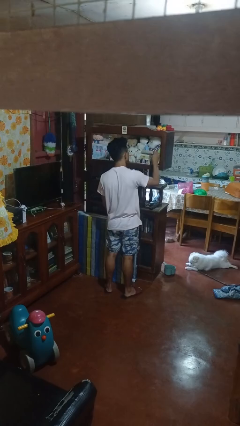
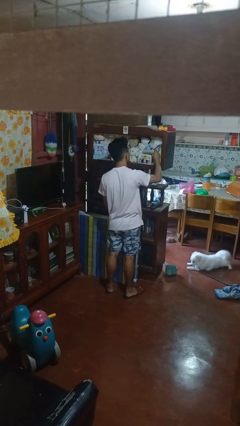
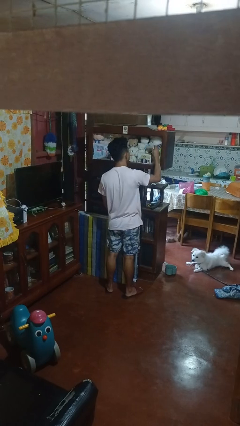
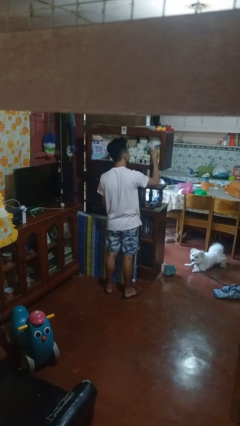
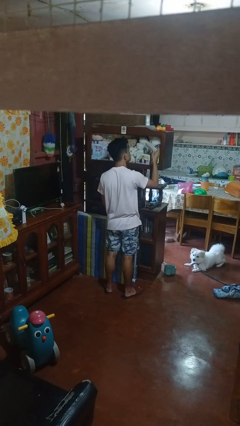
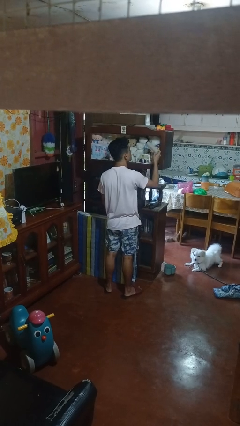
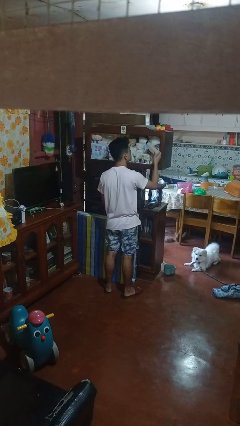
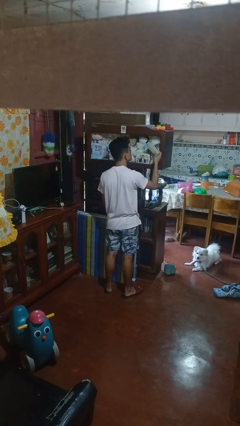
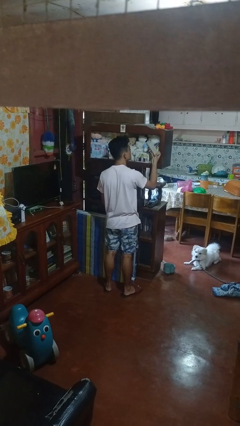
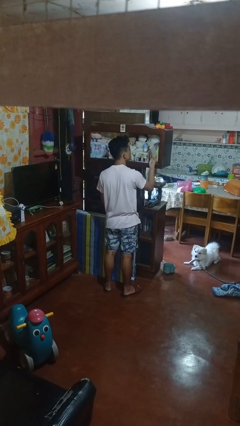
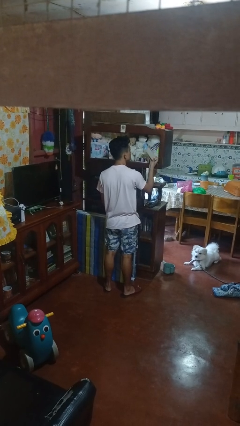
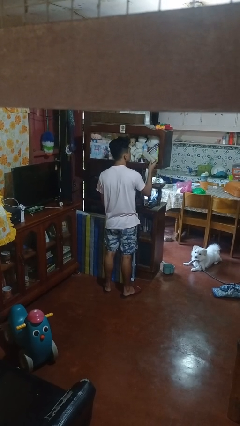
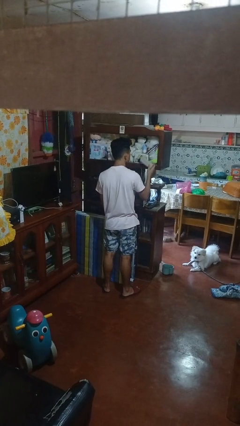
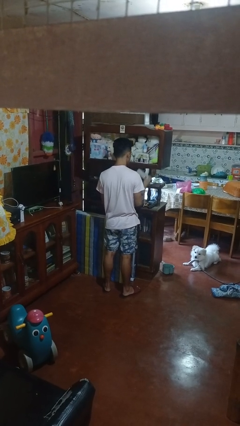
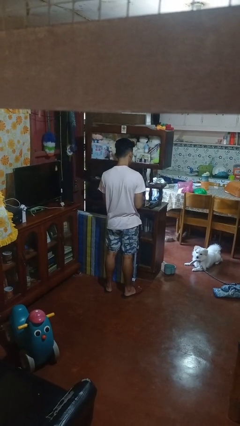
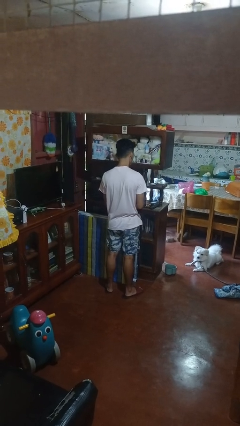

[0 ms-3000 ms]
person picks up object from shelf

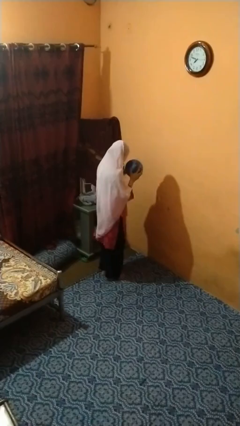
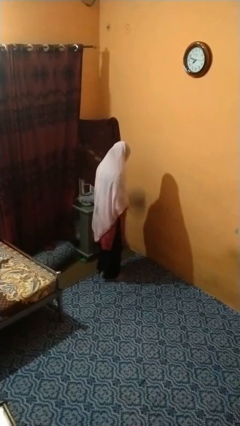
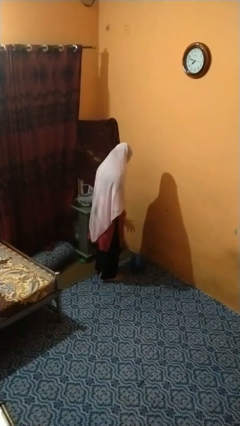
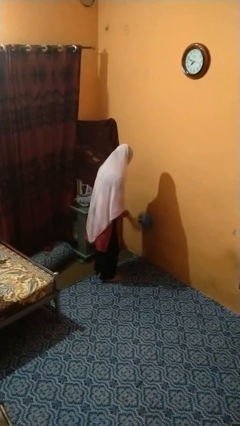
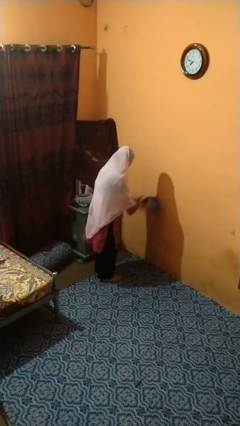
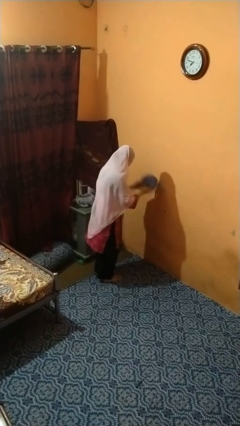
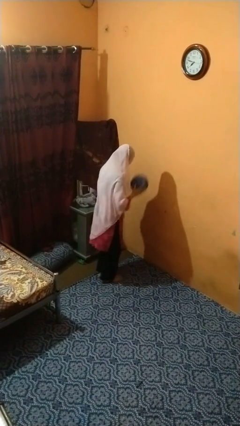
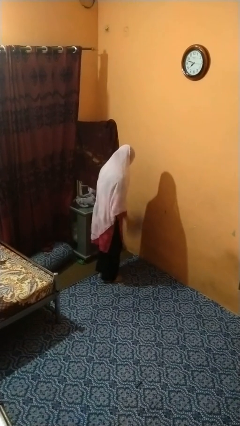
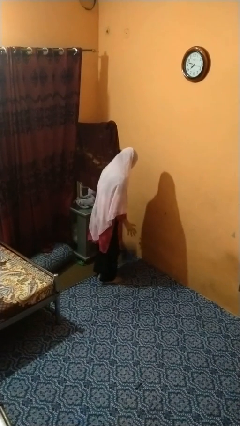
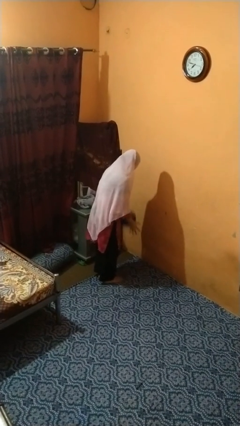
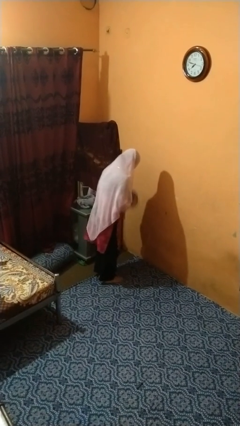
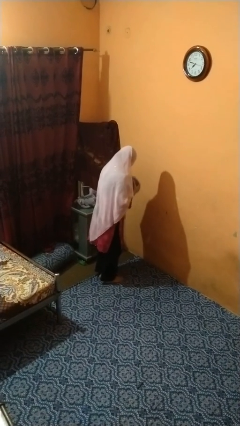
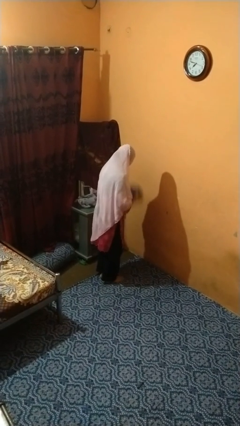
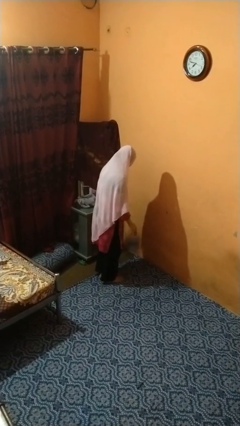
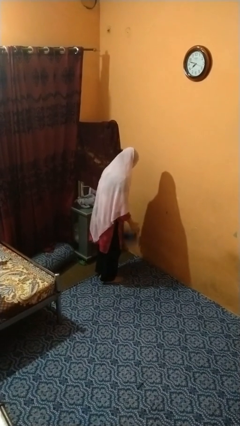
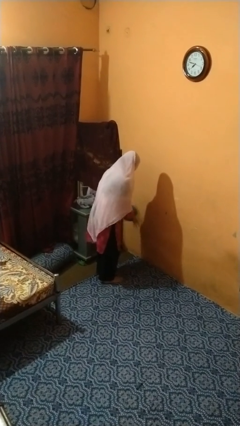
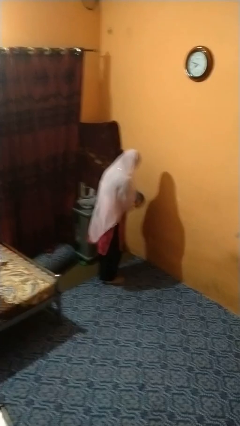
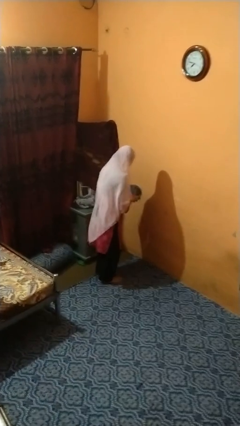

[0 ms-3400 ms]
person bounces ball on floor

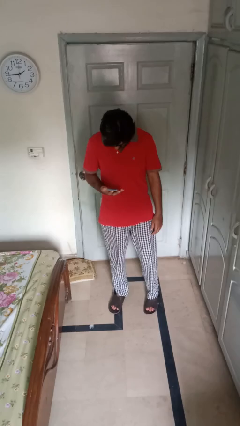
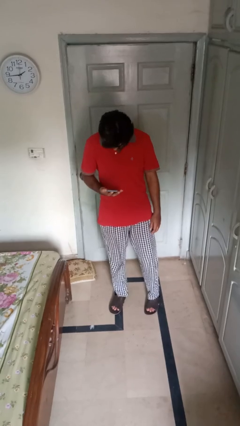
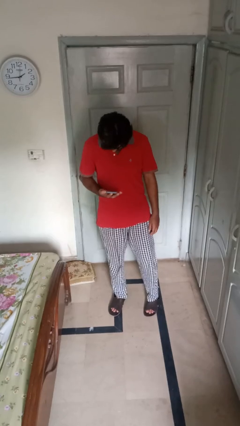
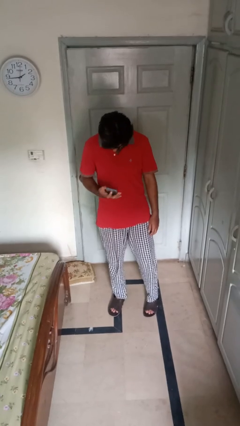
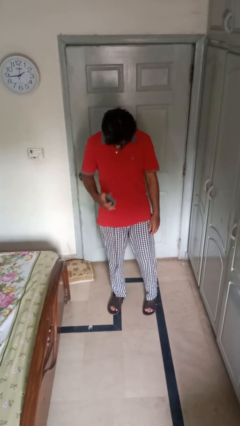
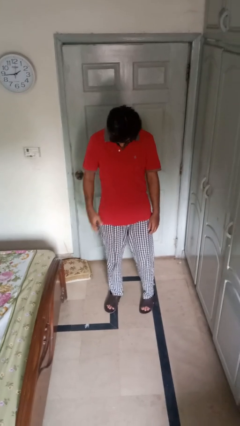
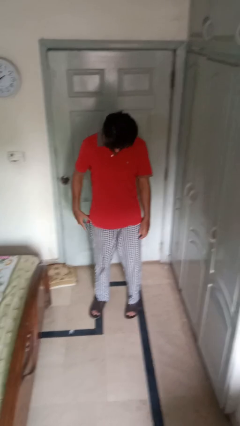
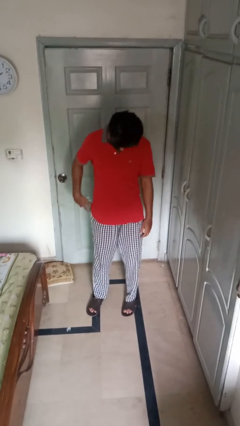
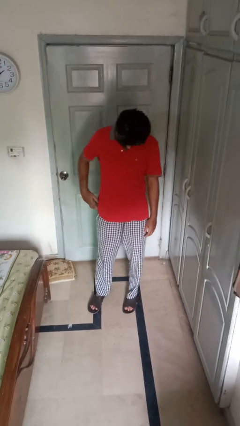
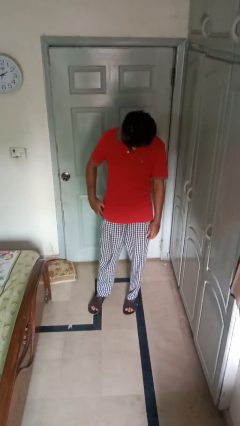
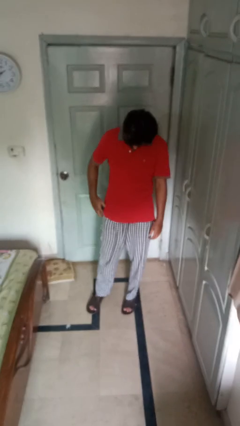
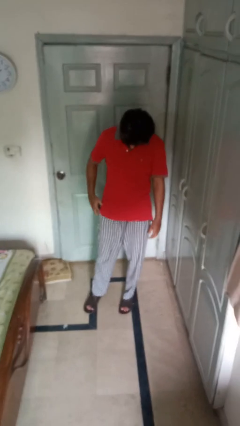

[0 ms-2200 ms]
person puts phone into pocket

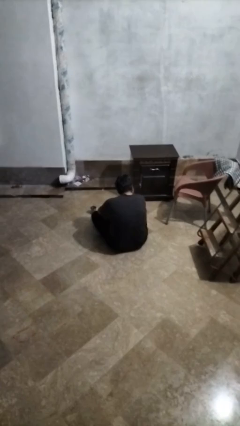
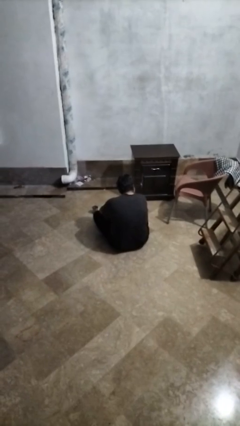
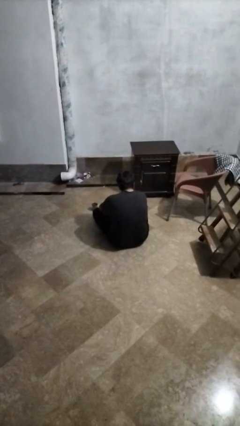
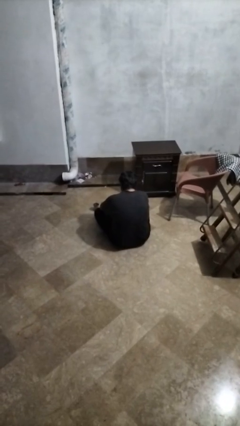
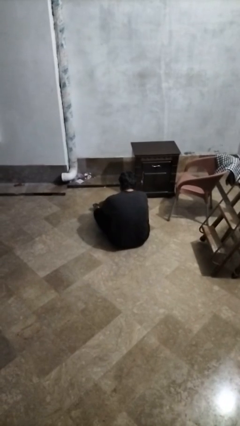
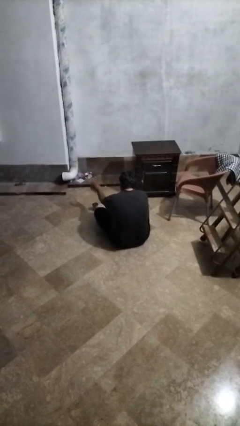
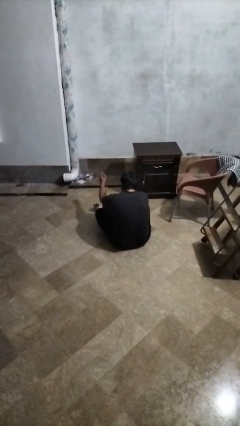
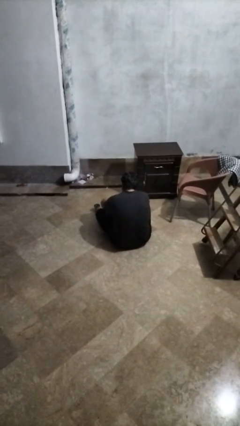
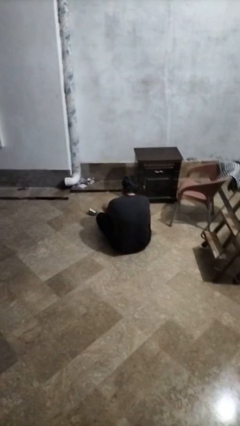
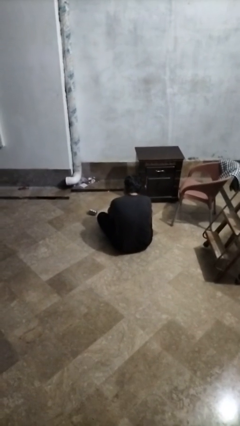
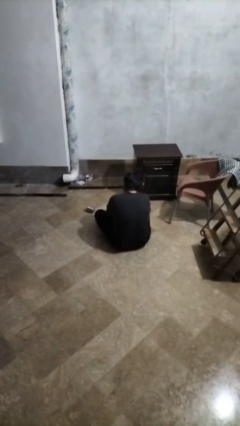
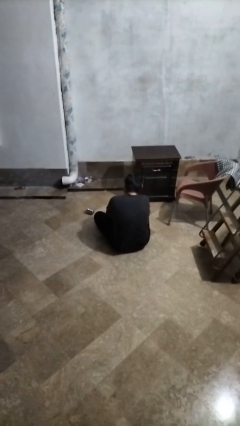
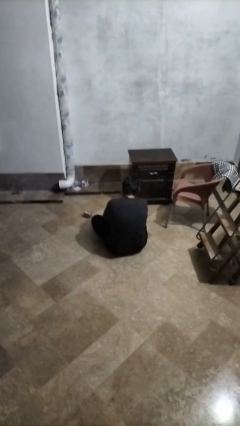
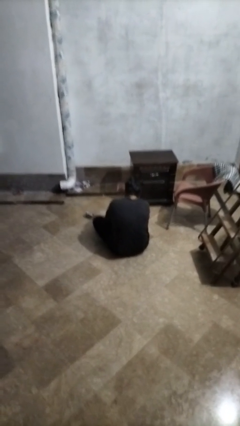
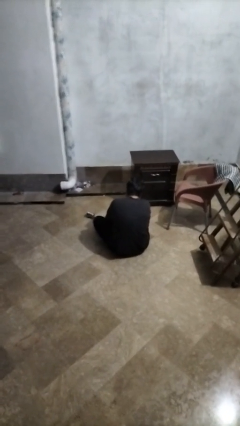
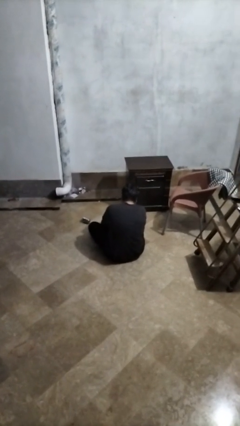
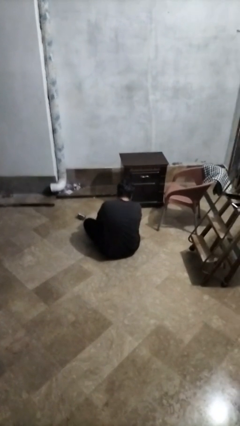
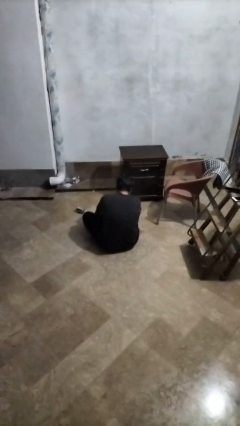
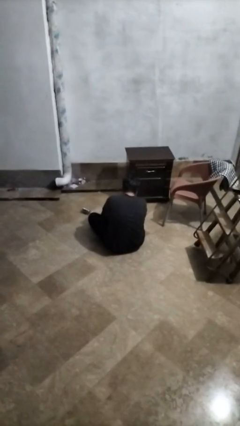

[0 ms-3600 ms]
person spills on floor

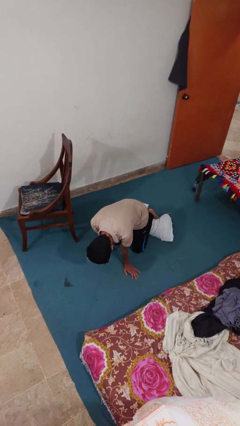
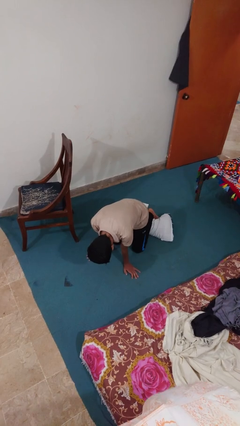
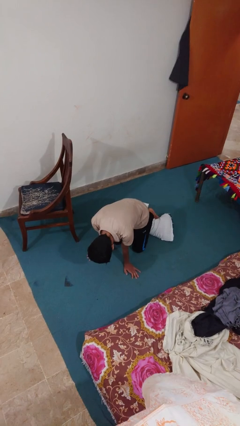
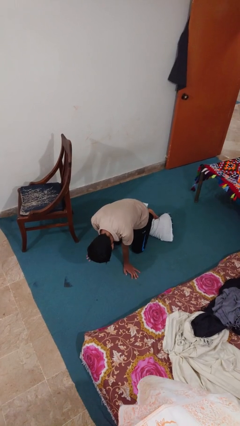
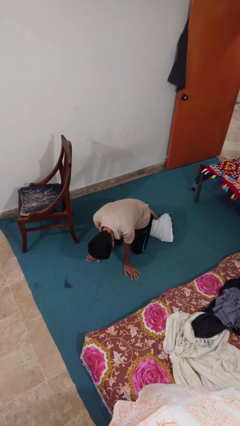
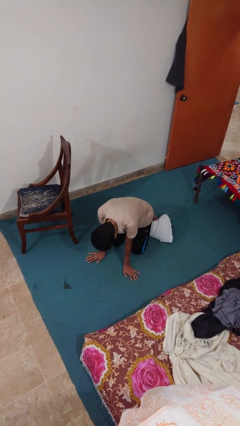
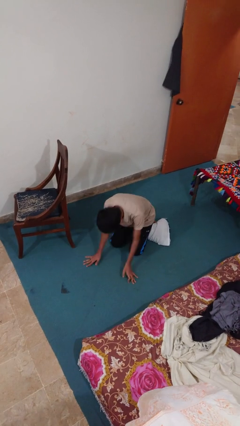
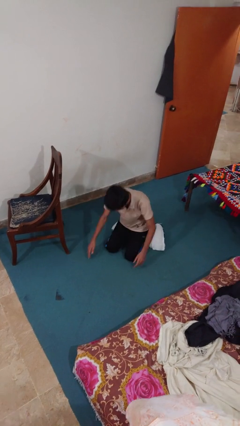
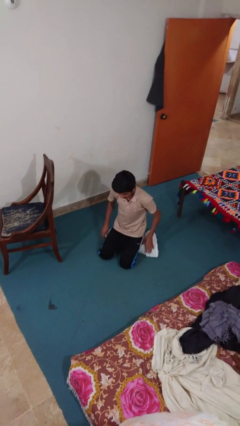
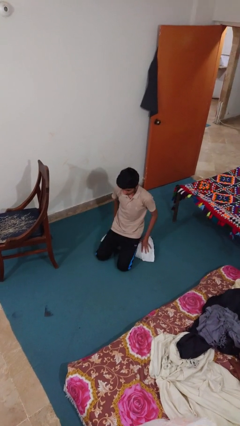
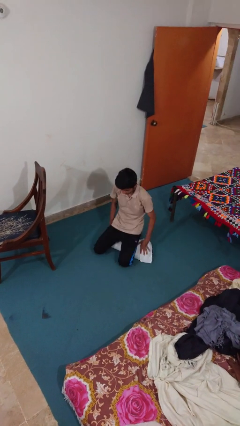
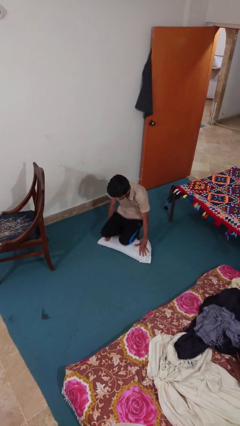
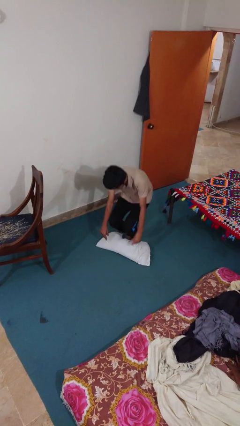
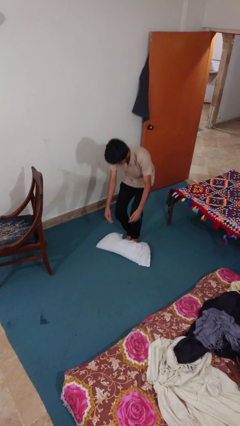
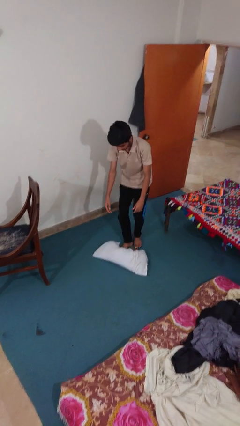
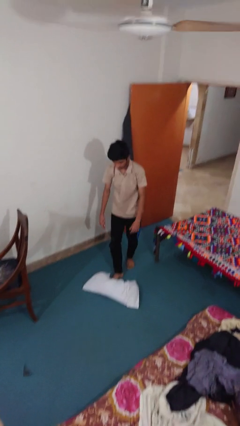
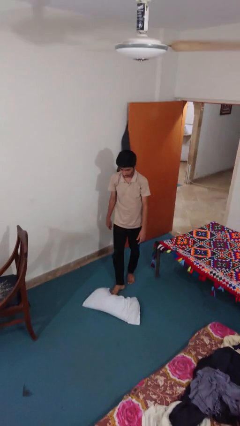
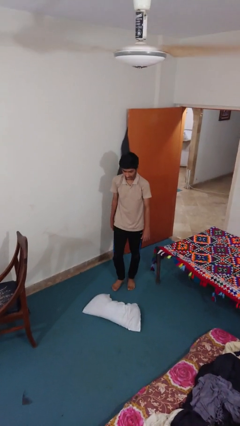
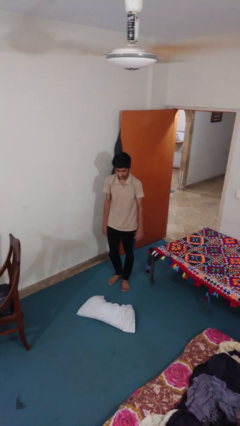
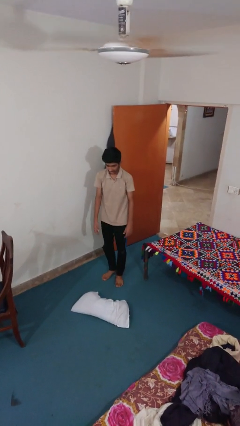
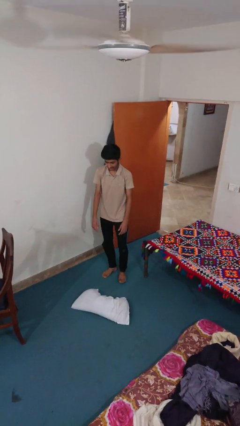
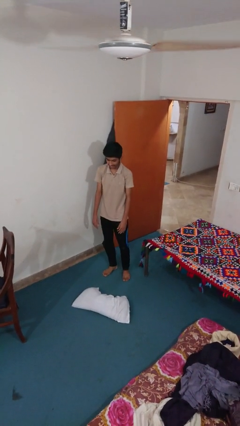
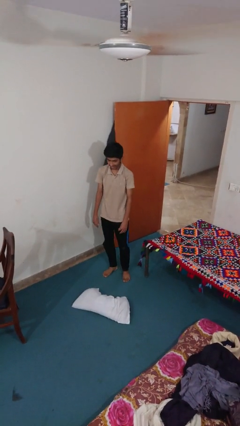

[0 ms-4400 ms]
person stands up from floor

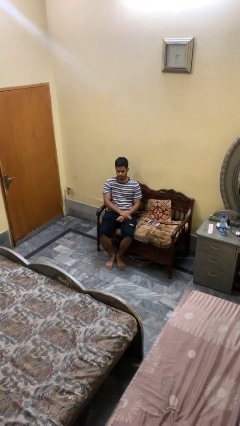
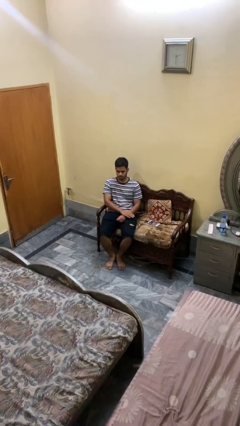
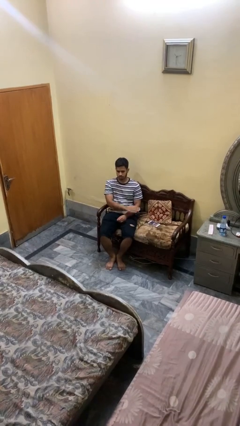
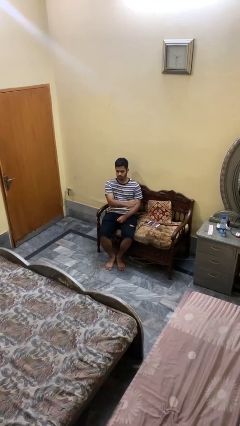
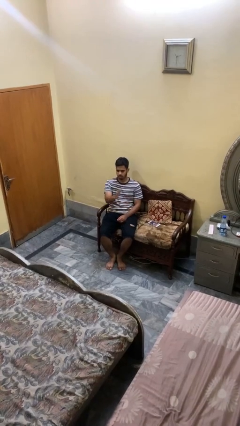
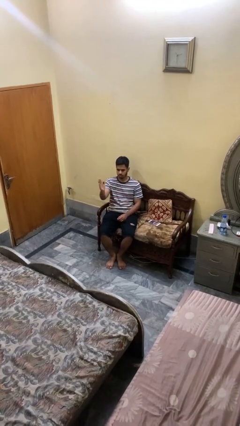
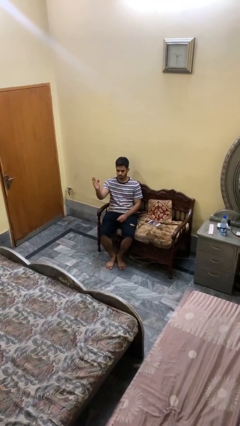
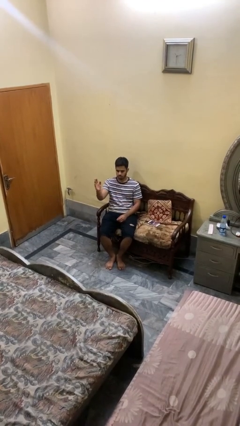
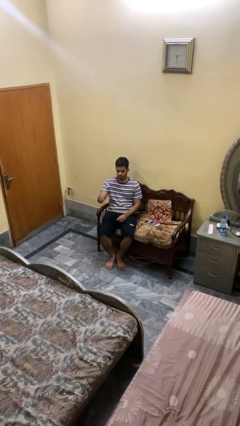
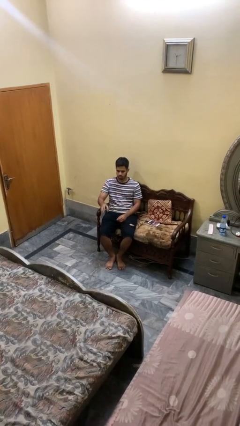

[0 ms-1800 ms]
person gestures swipe right
